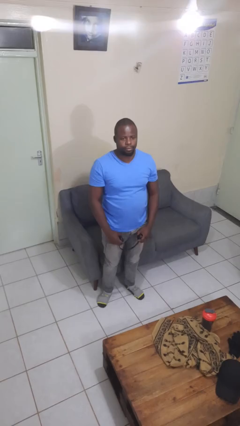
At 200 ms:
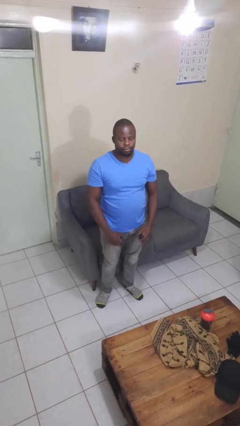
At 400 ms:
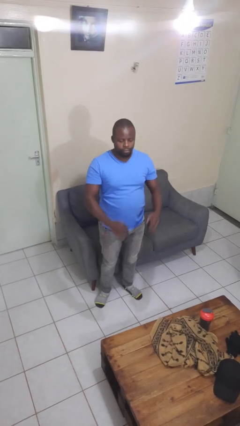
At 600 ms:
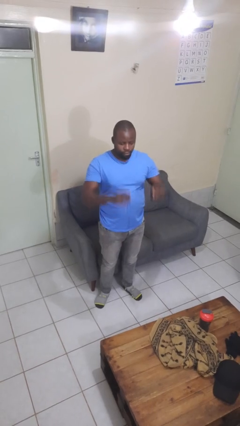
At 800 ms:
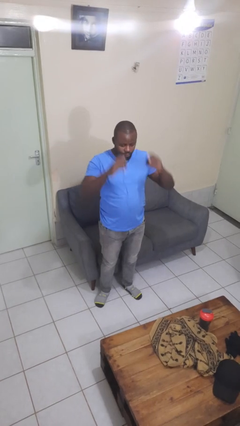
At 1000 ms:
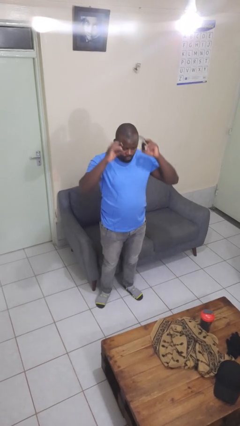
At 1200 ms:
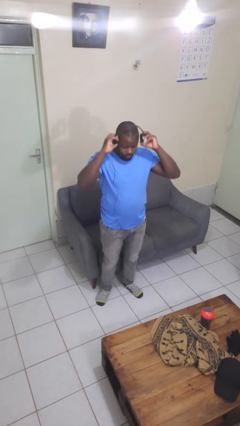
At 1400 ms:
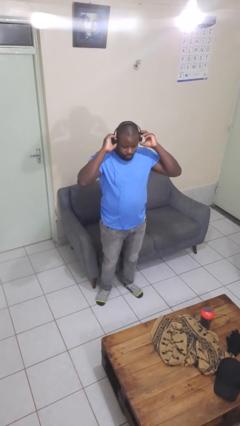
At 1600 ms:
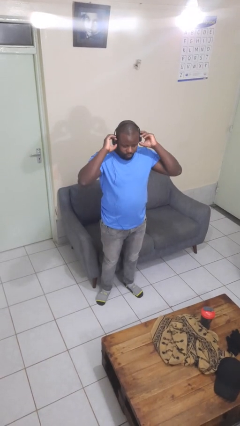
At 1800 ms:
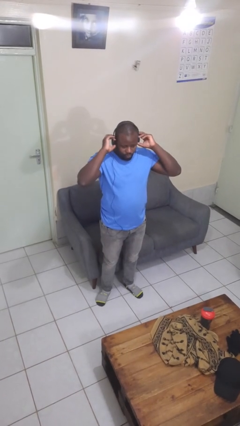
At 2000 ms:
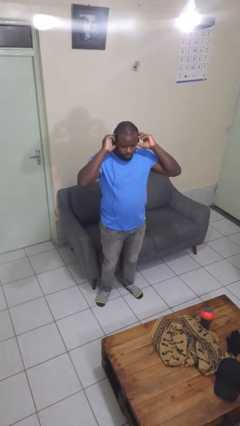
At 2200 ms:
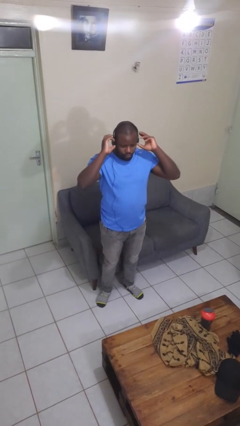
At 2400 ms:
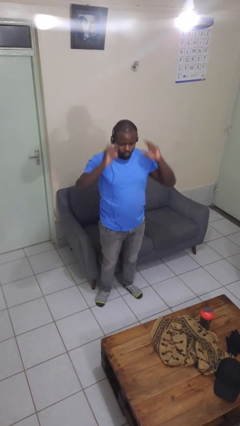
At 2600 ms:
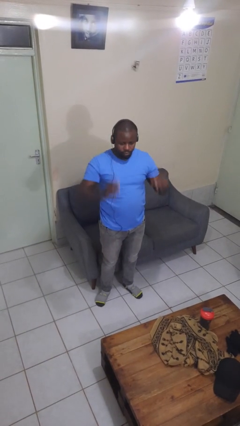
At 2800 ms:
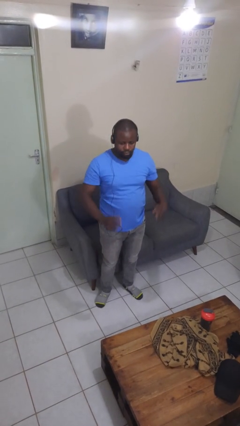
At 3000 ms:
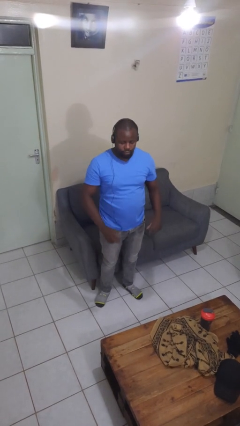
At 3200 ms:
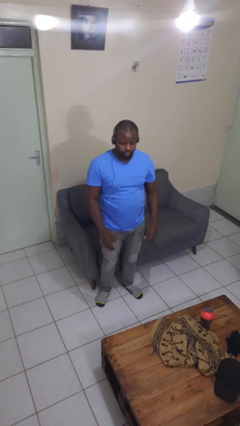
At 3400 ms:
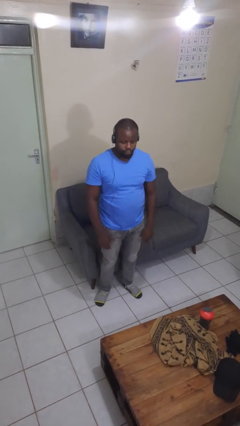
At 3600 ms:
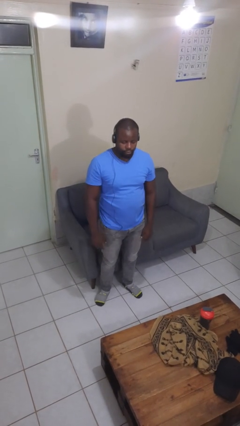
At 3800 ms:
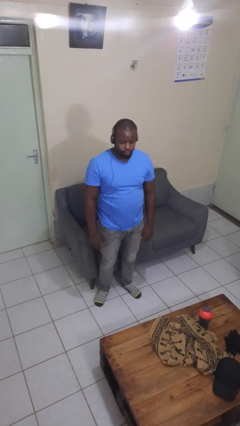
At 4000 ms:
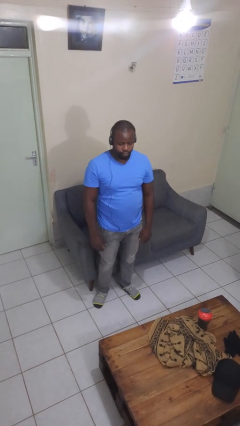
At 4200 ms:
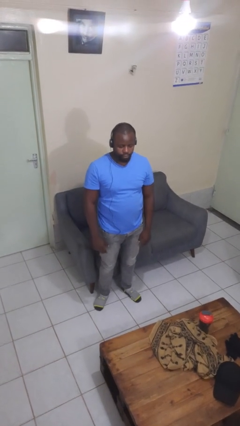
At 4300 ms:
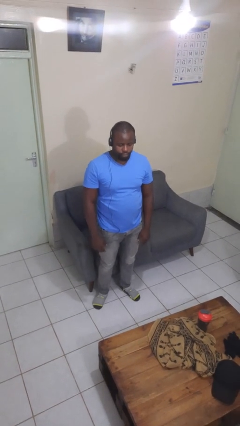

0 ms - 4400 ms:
person puts on headphones

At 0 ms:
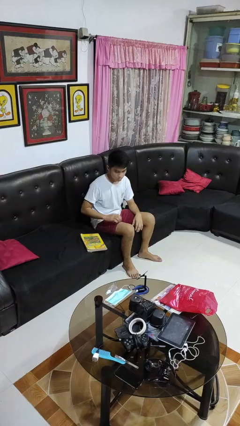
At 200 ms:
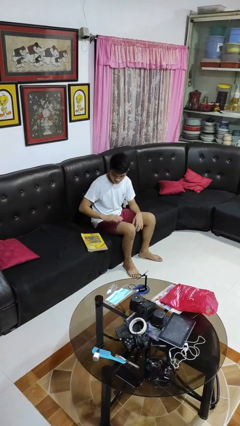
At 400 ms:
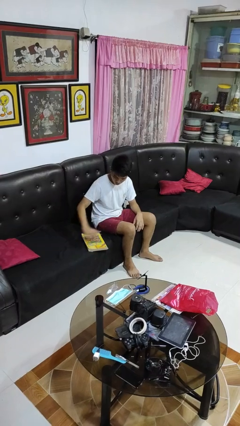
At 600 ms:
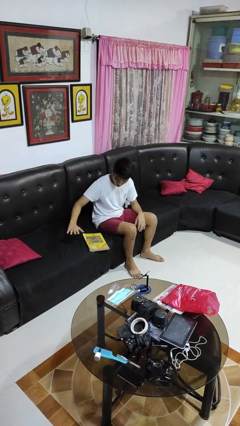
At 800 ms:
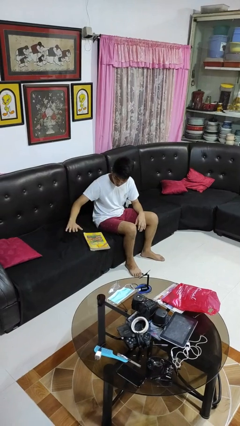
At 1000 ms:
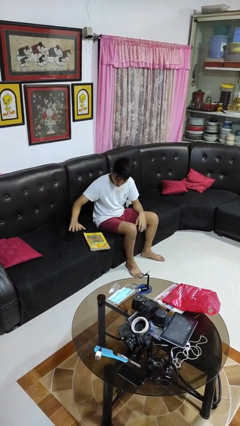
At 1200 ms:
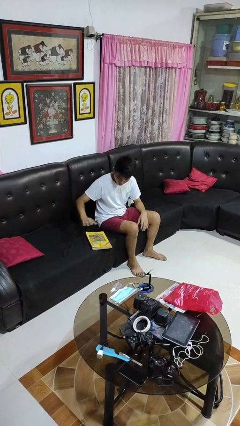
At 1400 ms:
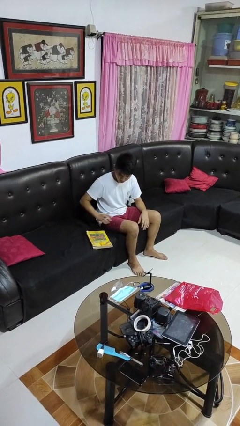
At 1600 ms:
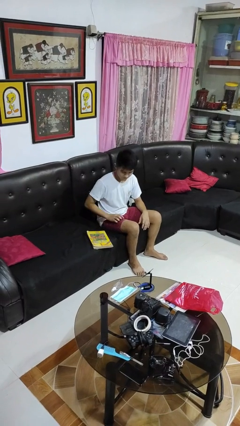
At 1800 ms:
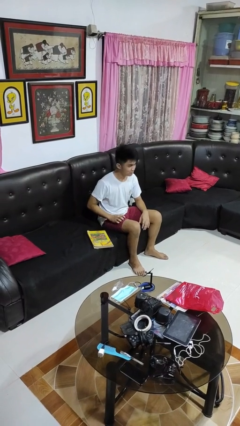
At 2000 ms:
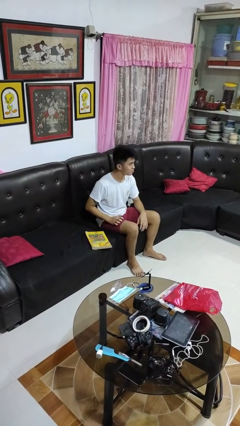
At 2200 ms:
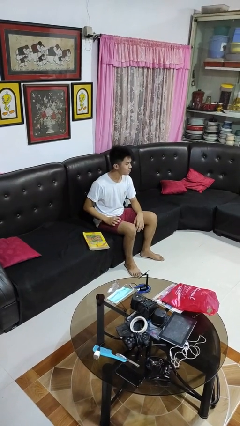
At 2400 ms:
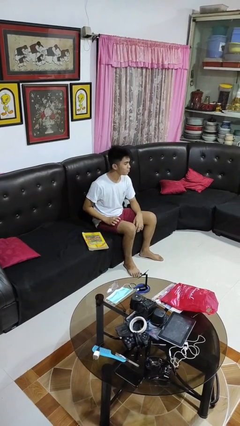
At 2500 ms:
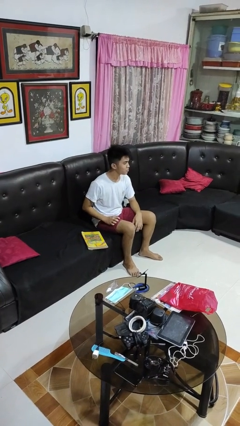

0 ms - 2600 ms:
person waves hand over object

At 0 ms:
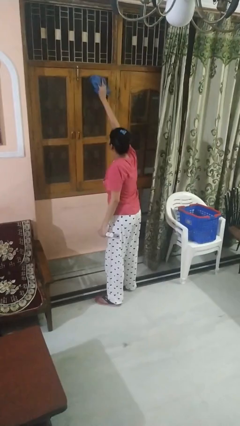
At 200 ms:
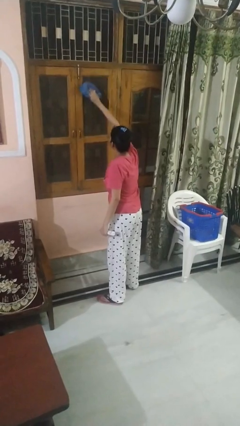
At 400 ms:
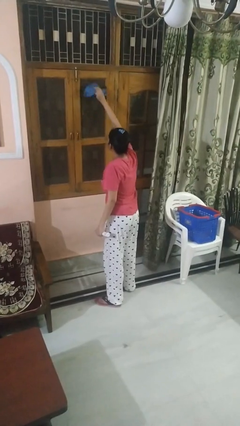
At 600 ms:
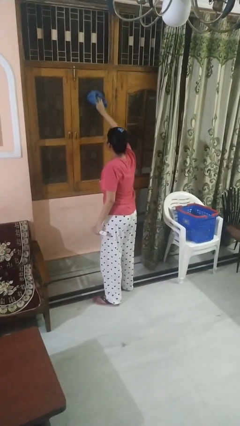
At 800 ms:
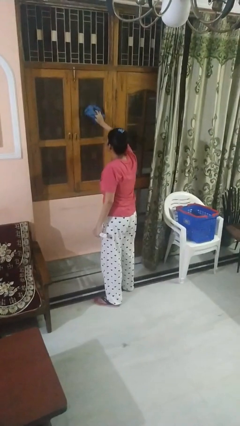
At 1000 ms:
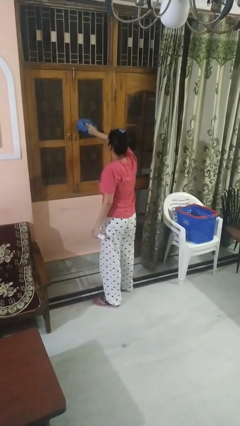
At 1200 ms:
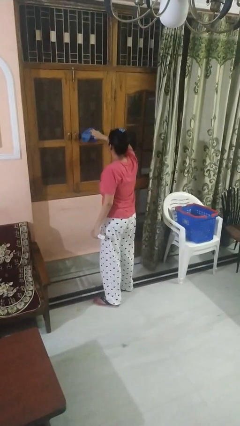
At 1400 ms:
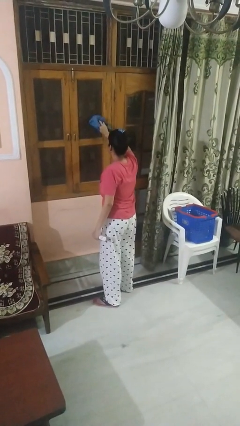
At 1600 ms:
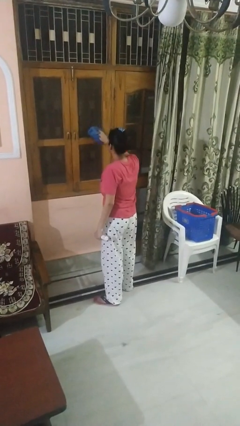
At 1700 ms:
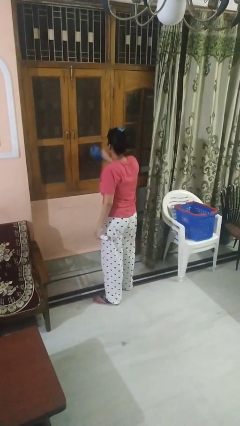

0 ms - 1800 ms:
person washes window

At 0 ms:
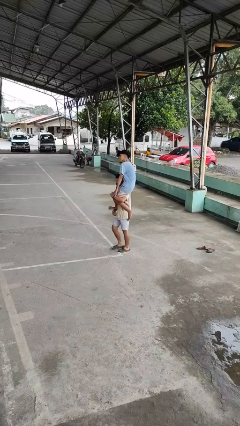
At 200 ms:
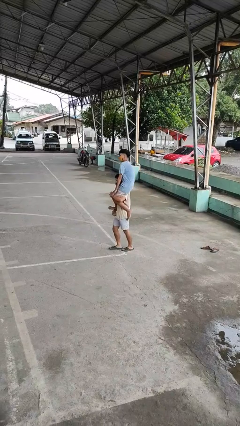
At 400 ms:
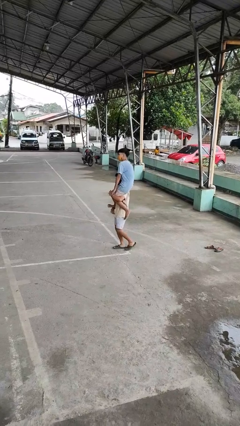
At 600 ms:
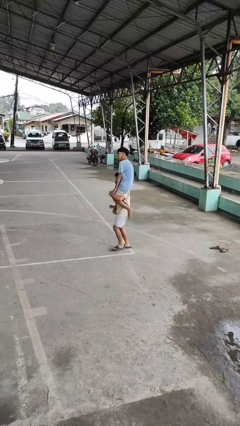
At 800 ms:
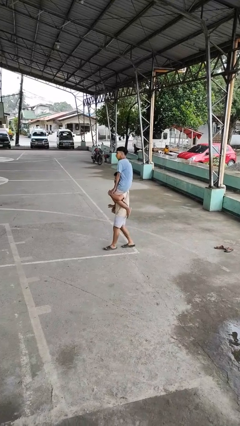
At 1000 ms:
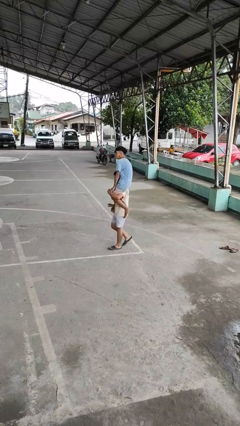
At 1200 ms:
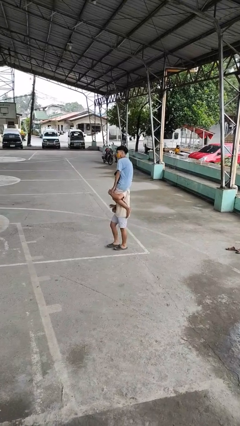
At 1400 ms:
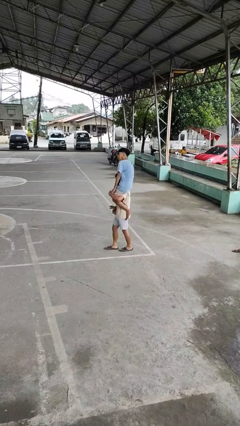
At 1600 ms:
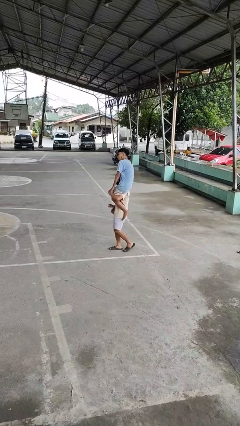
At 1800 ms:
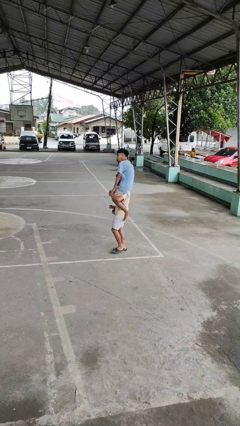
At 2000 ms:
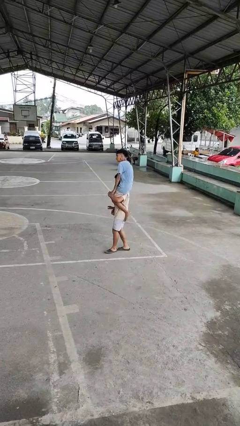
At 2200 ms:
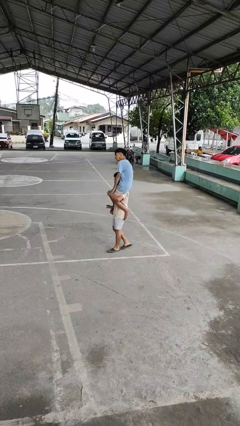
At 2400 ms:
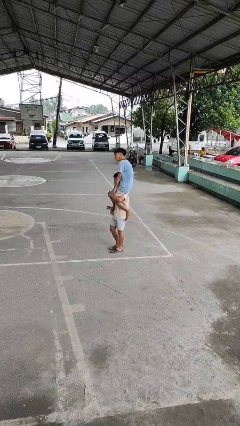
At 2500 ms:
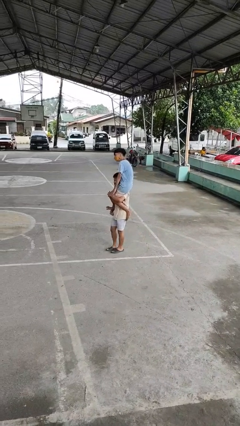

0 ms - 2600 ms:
person carries person on shoulders

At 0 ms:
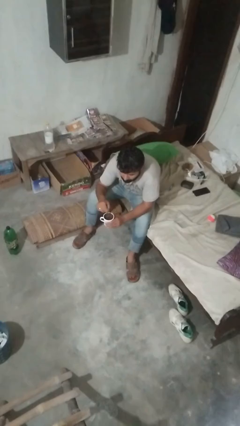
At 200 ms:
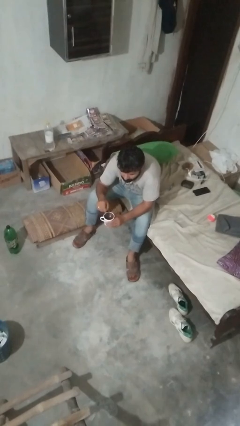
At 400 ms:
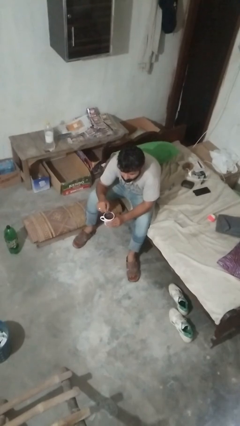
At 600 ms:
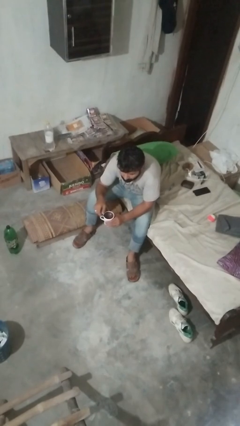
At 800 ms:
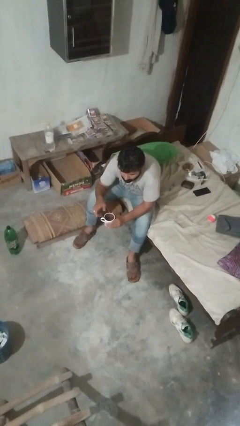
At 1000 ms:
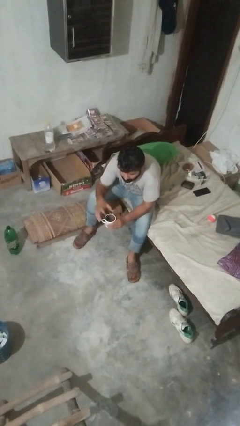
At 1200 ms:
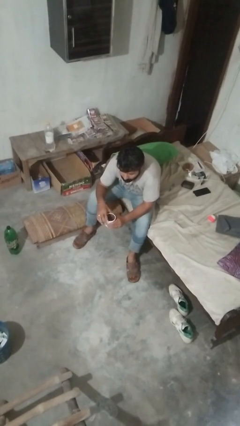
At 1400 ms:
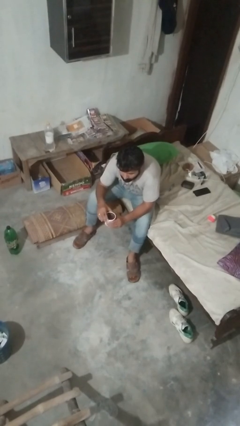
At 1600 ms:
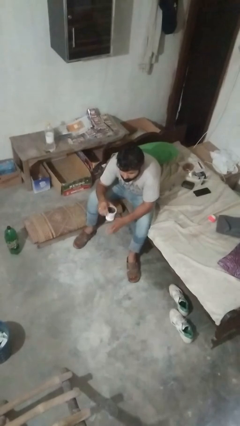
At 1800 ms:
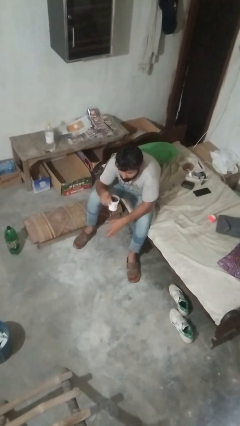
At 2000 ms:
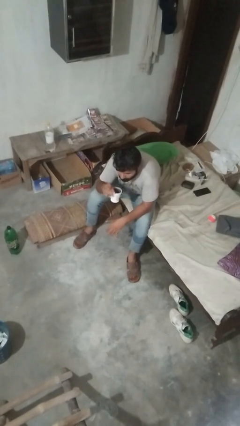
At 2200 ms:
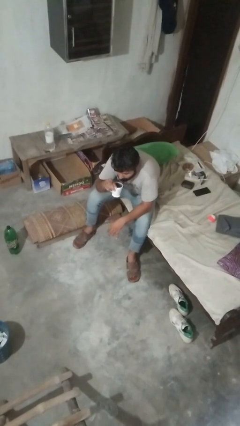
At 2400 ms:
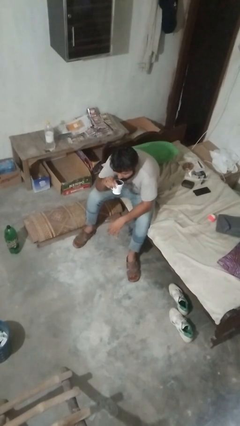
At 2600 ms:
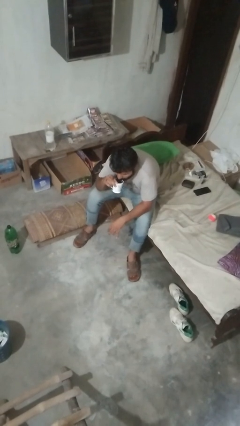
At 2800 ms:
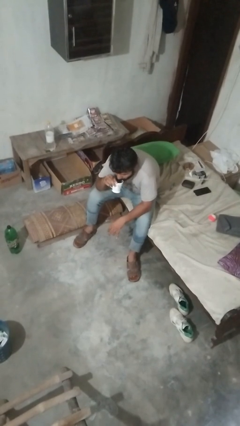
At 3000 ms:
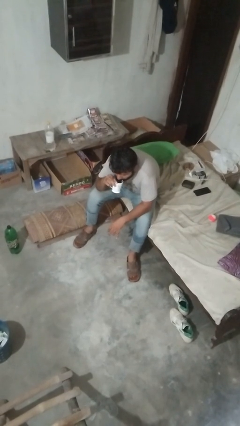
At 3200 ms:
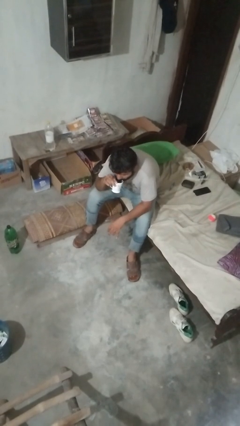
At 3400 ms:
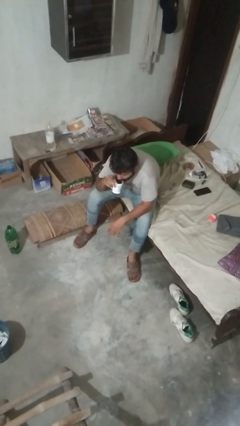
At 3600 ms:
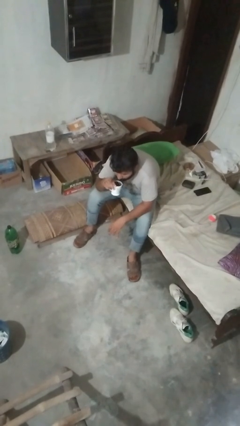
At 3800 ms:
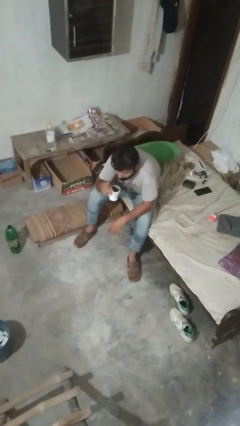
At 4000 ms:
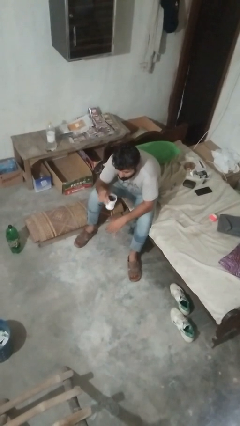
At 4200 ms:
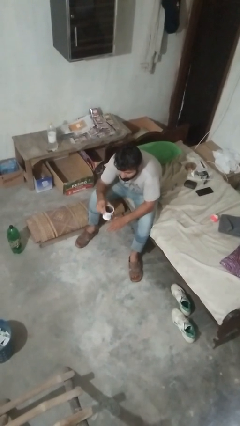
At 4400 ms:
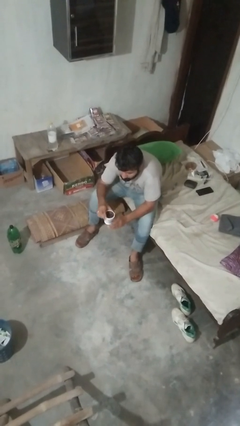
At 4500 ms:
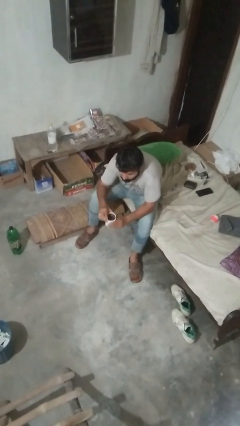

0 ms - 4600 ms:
person drinks from mug

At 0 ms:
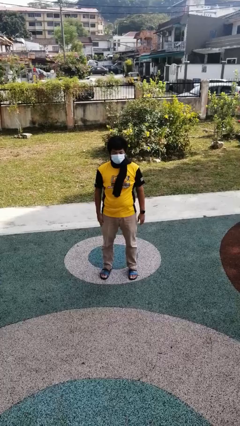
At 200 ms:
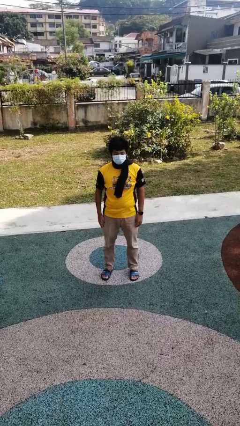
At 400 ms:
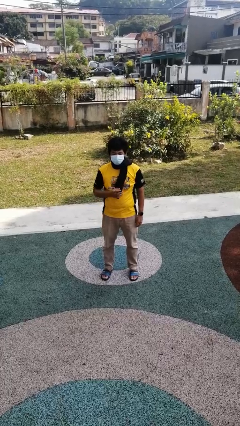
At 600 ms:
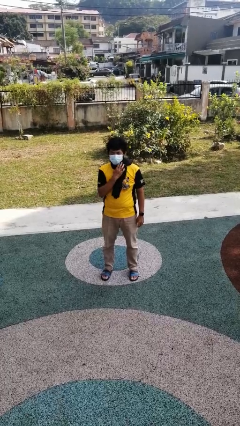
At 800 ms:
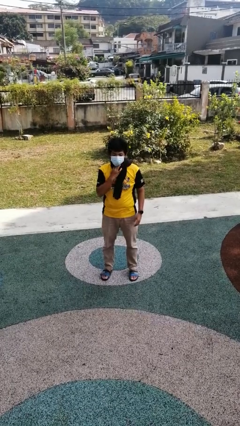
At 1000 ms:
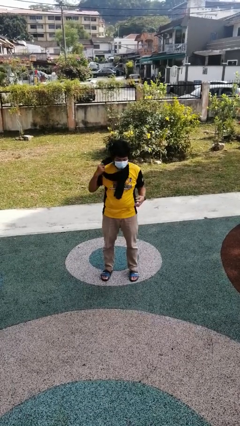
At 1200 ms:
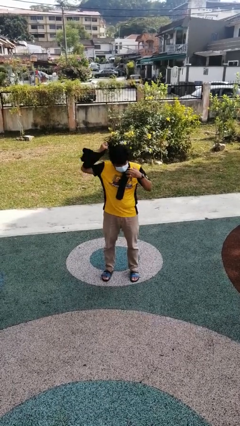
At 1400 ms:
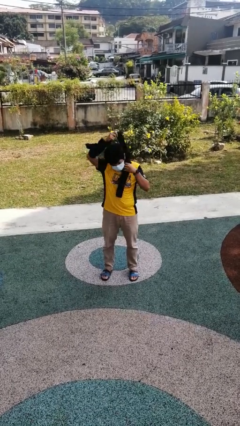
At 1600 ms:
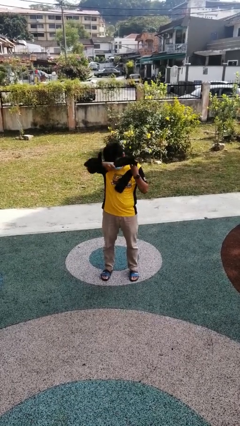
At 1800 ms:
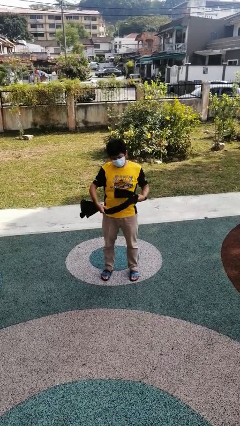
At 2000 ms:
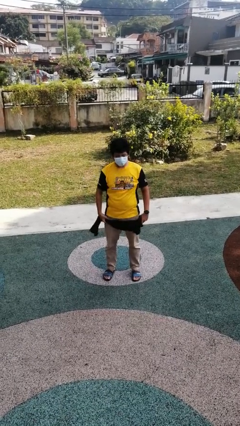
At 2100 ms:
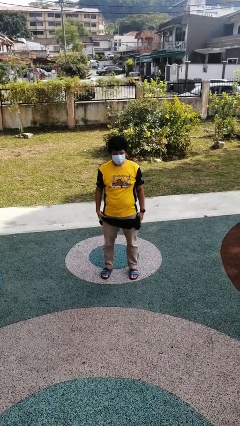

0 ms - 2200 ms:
person takes off scarf
